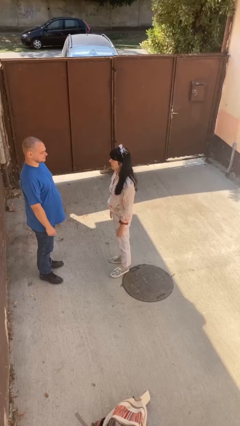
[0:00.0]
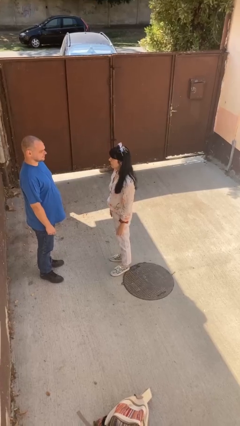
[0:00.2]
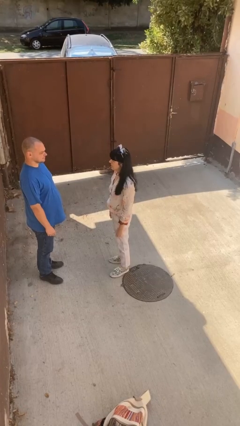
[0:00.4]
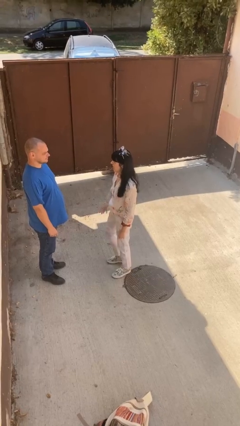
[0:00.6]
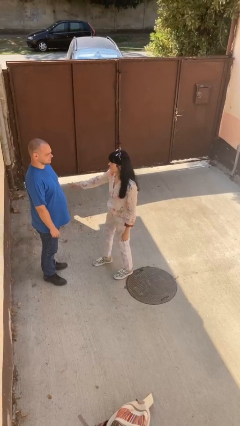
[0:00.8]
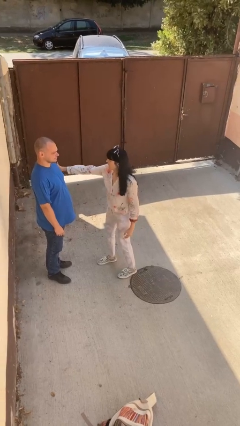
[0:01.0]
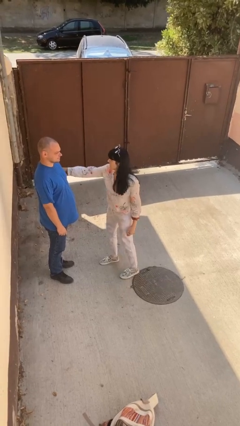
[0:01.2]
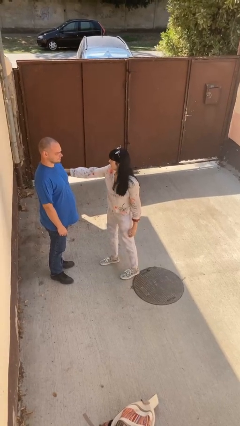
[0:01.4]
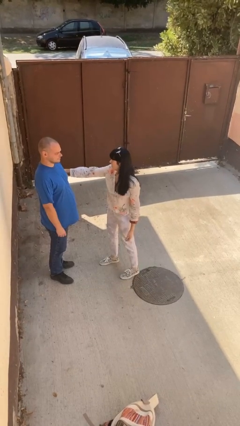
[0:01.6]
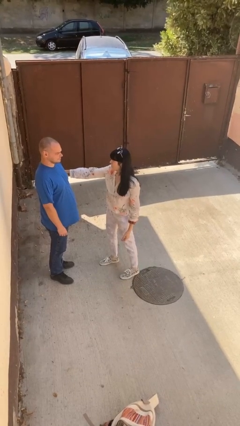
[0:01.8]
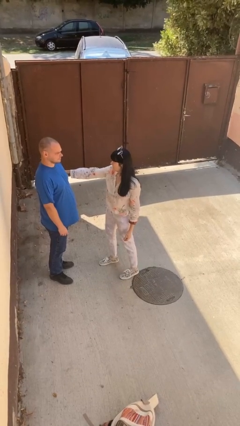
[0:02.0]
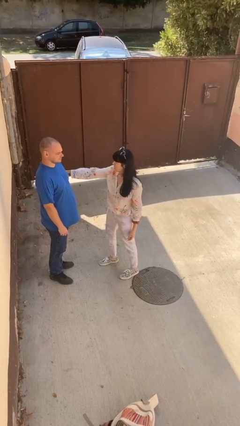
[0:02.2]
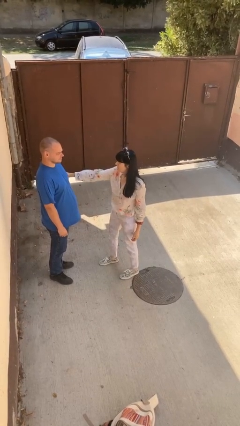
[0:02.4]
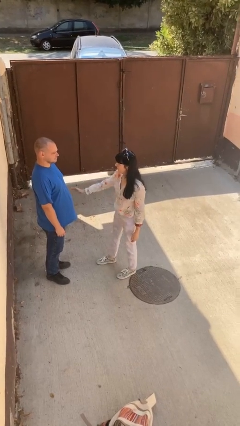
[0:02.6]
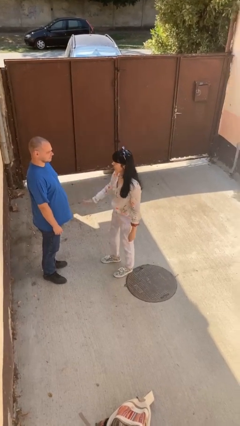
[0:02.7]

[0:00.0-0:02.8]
person grabs person by bicep

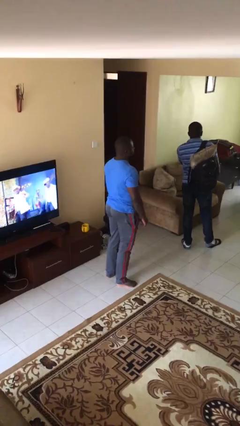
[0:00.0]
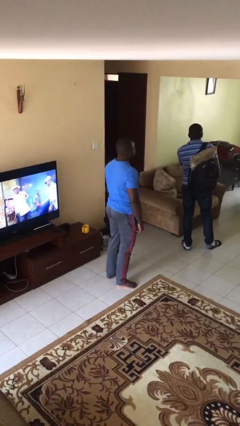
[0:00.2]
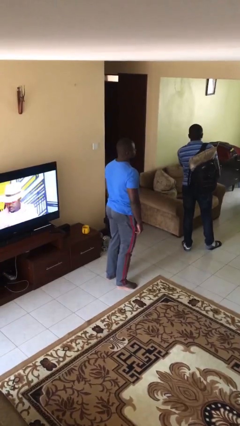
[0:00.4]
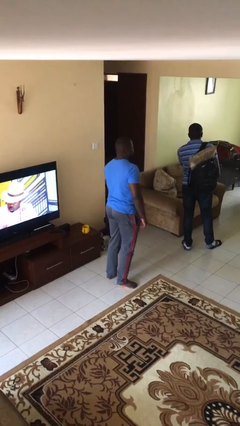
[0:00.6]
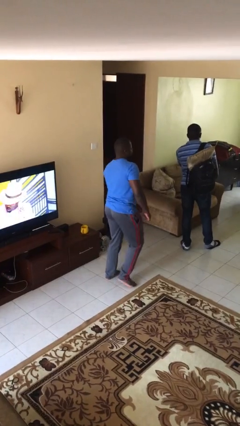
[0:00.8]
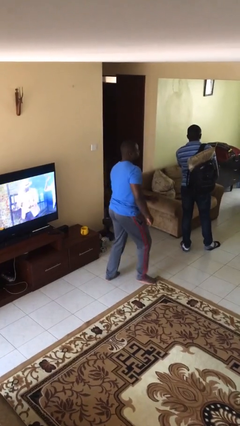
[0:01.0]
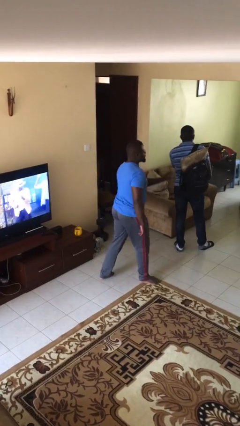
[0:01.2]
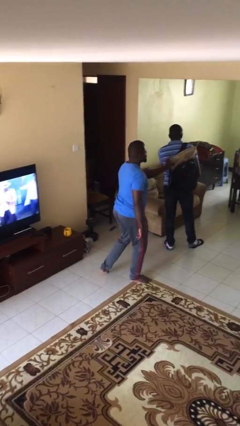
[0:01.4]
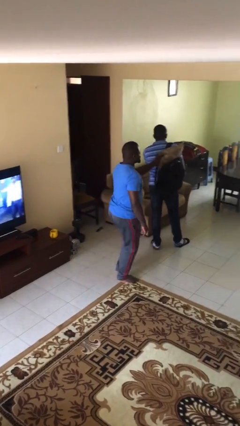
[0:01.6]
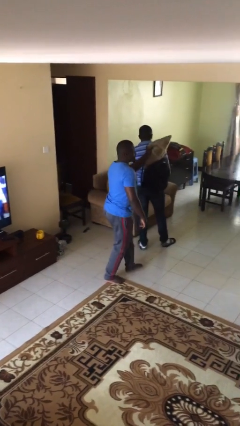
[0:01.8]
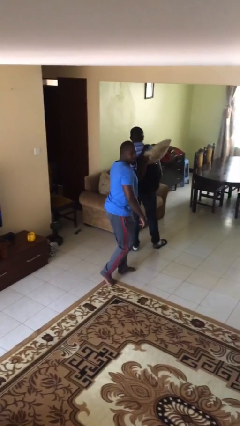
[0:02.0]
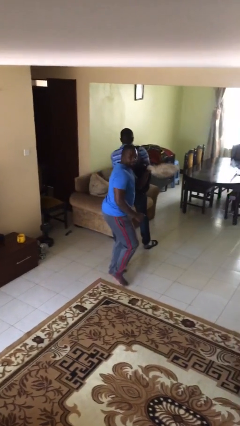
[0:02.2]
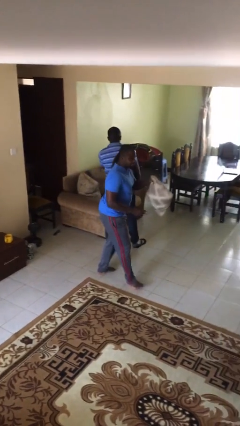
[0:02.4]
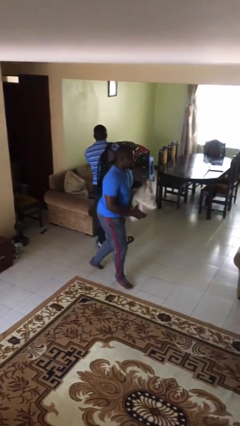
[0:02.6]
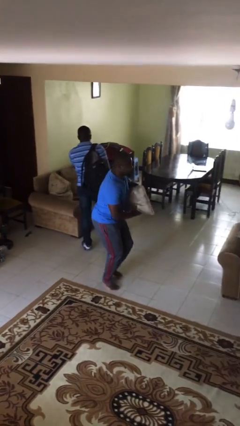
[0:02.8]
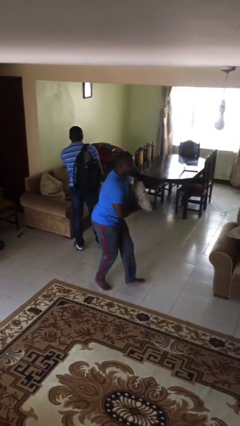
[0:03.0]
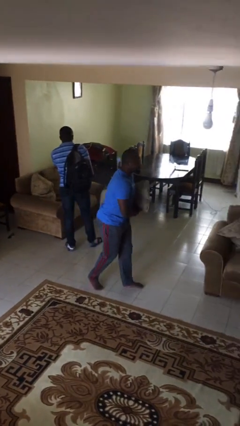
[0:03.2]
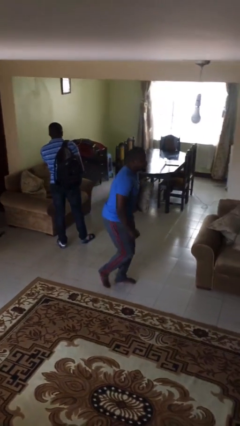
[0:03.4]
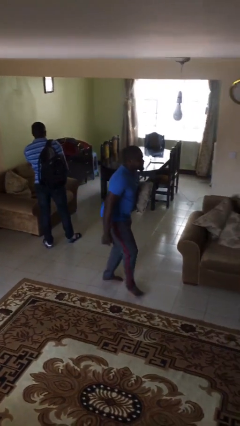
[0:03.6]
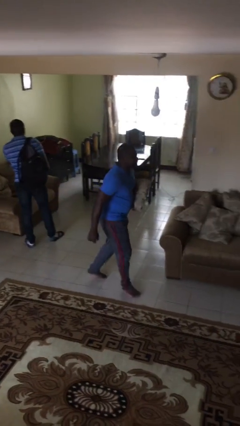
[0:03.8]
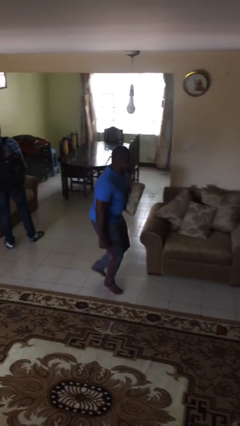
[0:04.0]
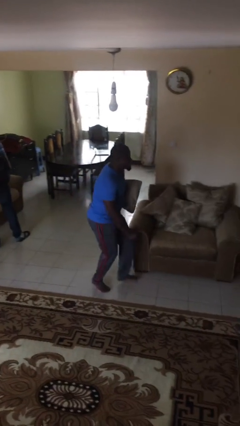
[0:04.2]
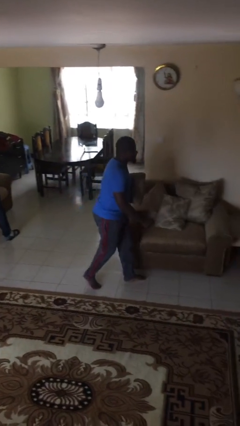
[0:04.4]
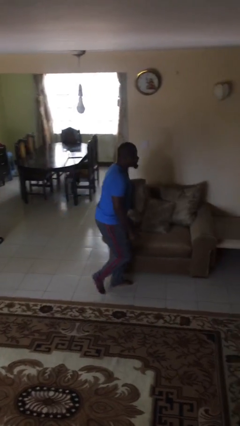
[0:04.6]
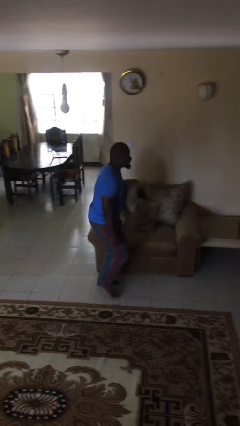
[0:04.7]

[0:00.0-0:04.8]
person steals object from person

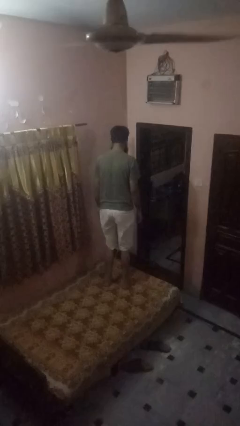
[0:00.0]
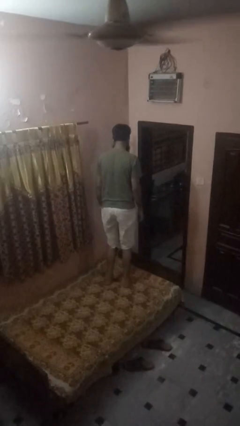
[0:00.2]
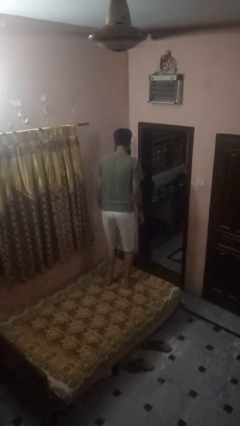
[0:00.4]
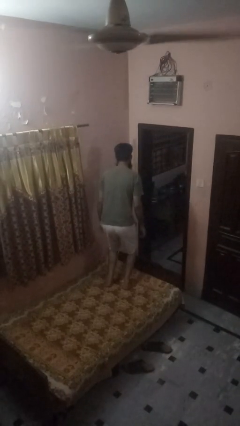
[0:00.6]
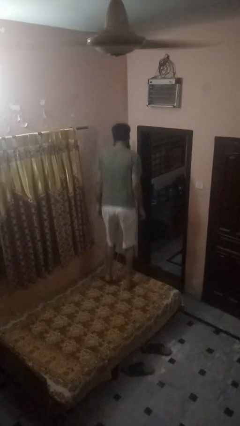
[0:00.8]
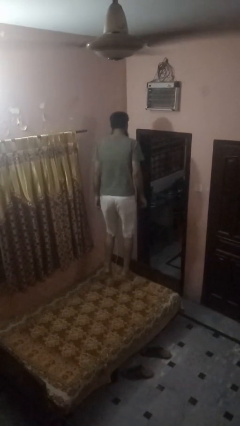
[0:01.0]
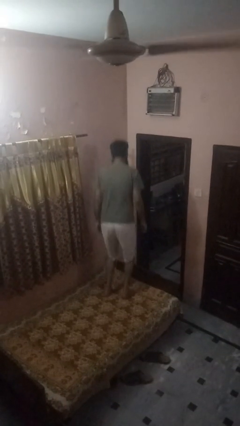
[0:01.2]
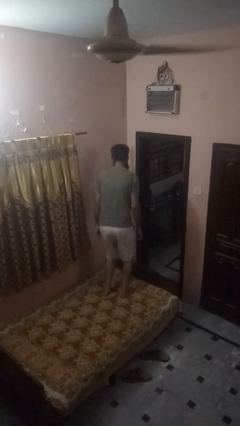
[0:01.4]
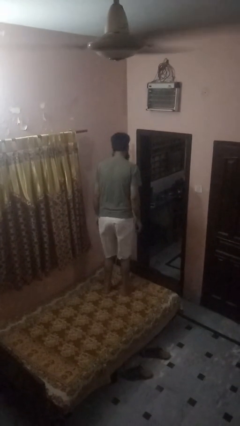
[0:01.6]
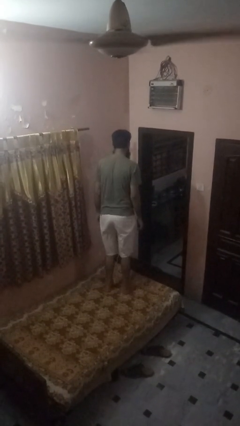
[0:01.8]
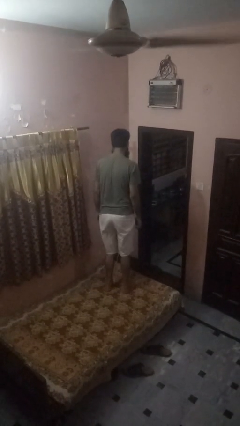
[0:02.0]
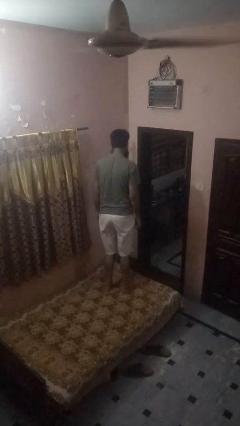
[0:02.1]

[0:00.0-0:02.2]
person jumps on bed

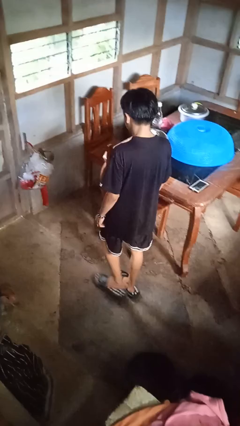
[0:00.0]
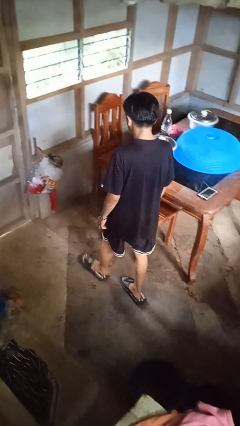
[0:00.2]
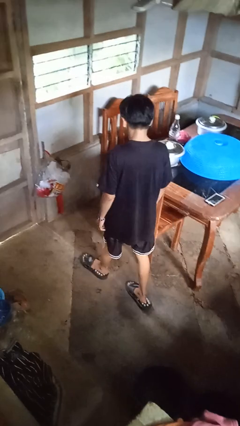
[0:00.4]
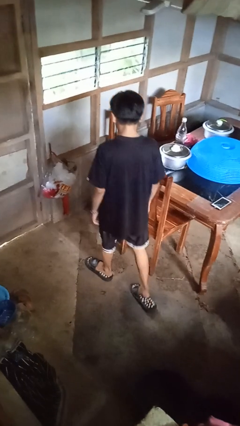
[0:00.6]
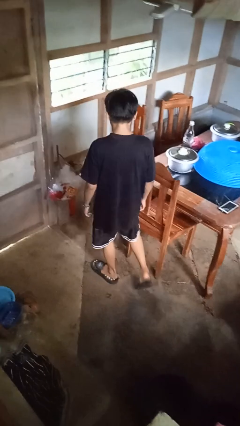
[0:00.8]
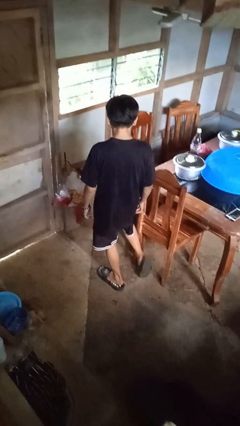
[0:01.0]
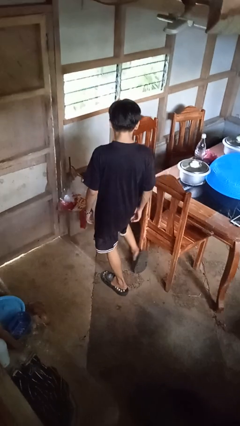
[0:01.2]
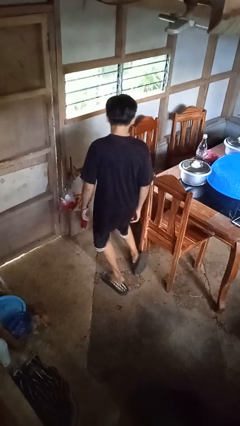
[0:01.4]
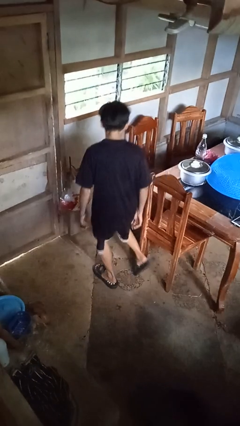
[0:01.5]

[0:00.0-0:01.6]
person stubs toe

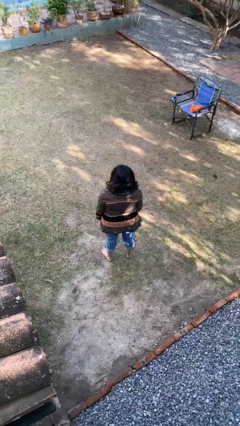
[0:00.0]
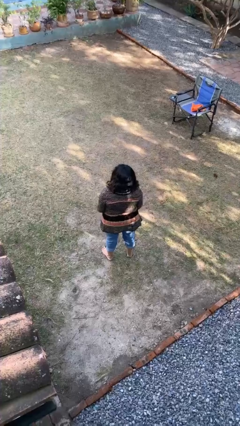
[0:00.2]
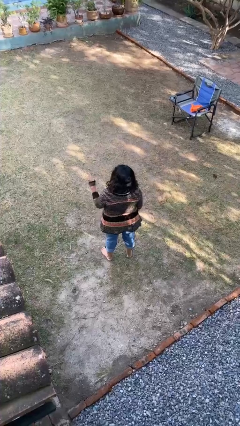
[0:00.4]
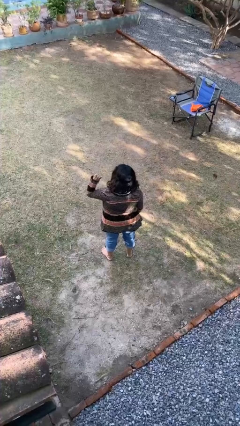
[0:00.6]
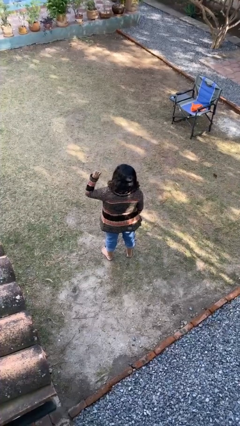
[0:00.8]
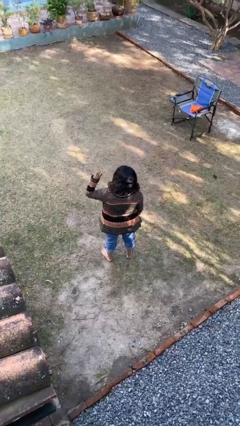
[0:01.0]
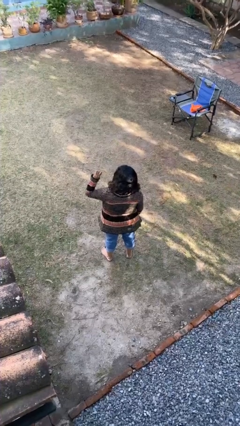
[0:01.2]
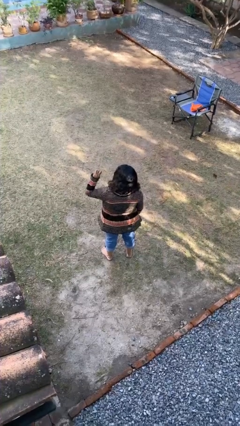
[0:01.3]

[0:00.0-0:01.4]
person gestures number three

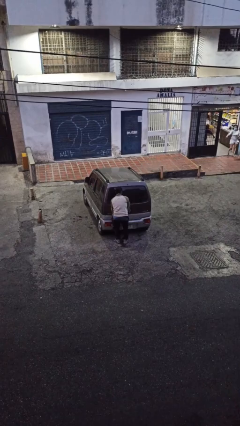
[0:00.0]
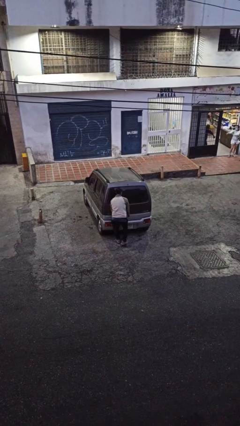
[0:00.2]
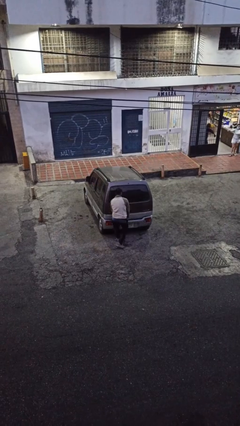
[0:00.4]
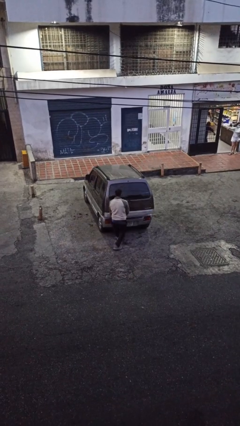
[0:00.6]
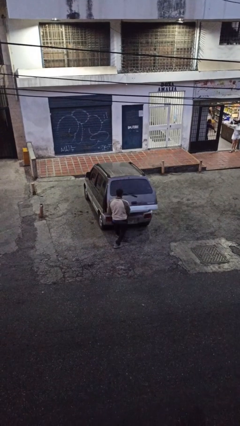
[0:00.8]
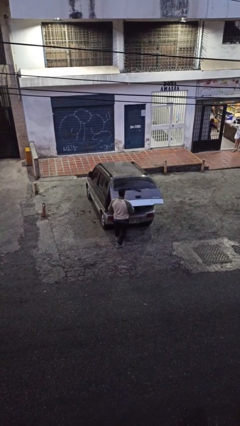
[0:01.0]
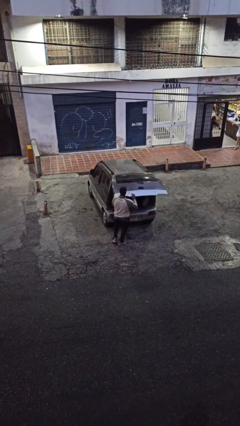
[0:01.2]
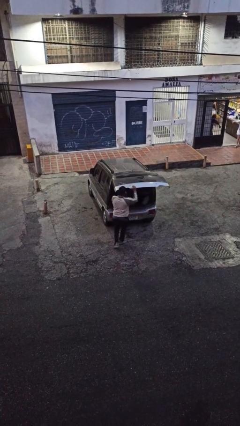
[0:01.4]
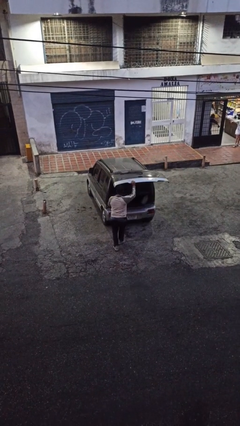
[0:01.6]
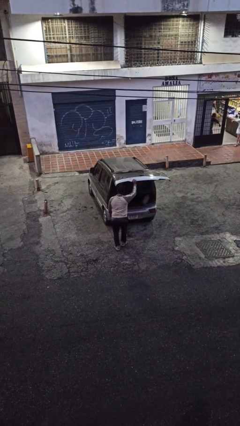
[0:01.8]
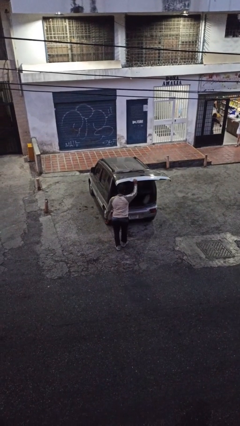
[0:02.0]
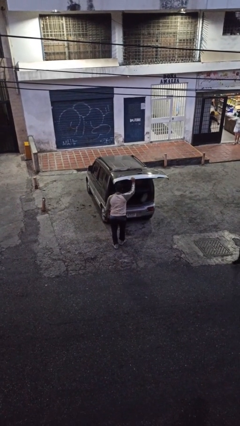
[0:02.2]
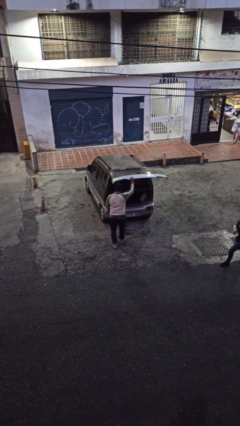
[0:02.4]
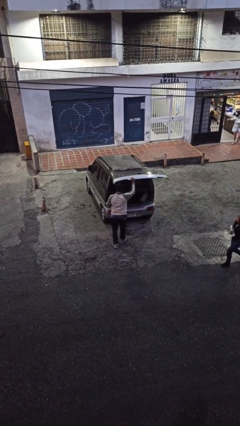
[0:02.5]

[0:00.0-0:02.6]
person opens car trunk

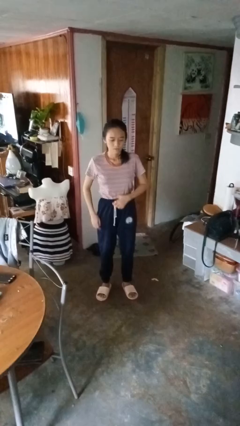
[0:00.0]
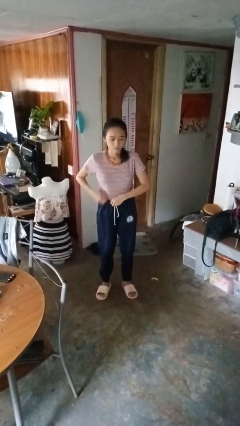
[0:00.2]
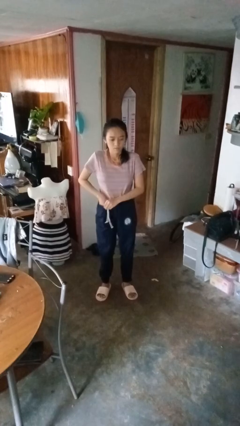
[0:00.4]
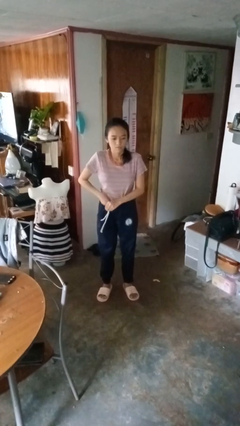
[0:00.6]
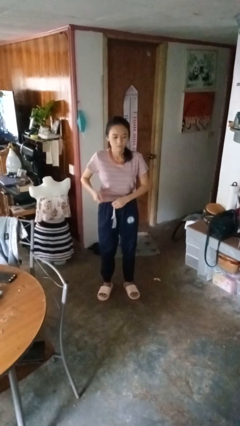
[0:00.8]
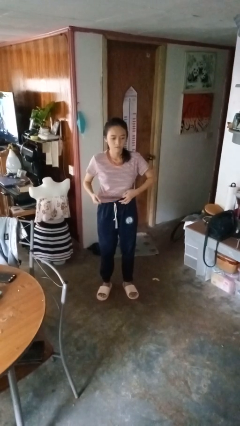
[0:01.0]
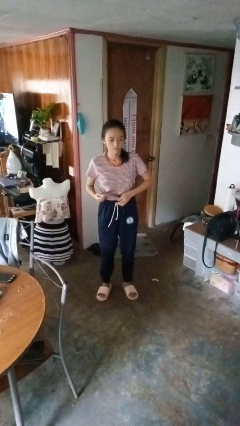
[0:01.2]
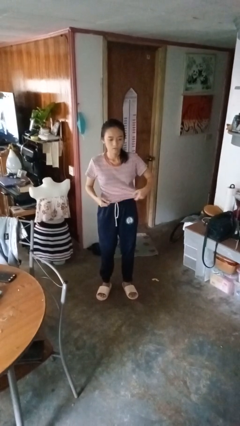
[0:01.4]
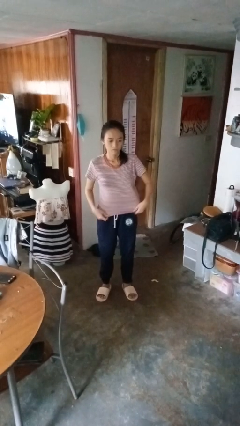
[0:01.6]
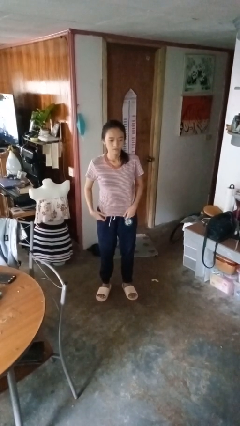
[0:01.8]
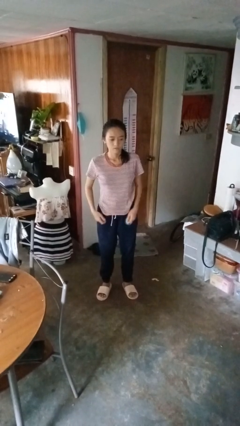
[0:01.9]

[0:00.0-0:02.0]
person untucks shirt
